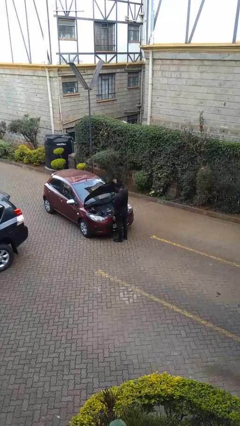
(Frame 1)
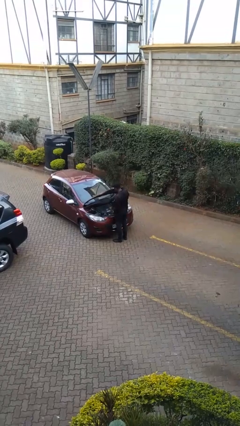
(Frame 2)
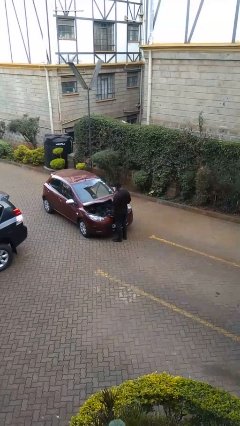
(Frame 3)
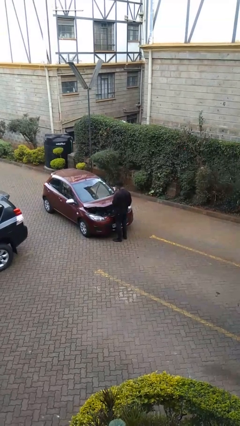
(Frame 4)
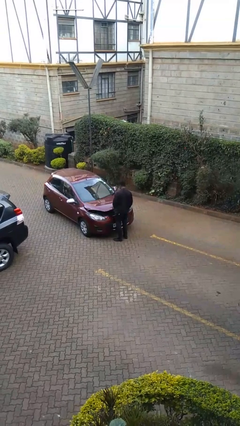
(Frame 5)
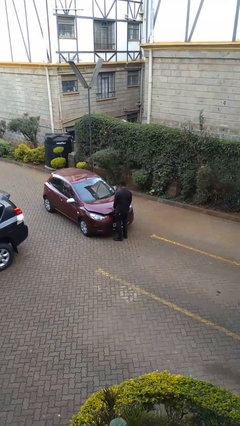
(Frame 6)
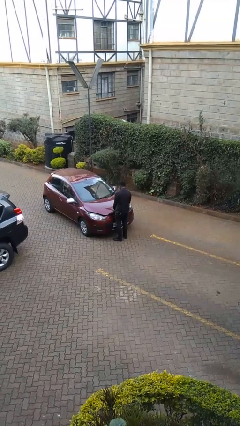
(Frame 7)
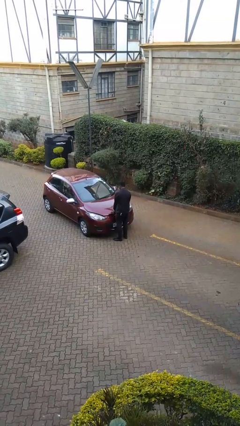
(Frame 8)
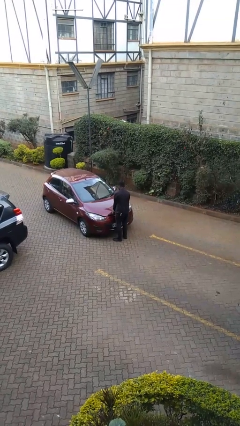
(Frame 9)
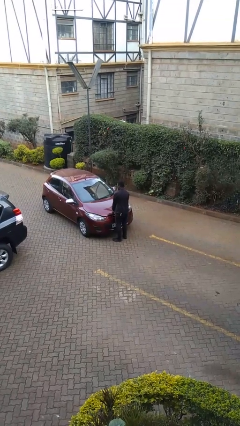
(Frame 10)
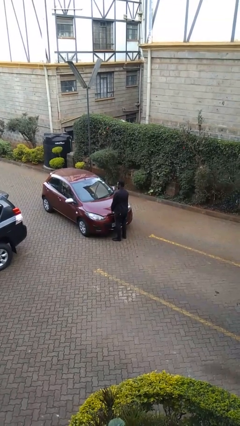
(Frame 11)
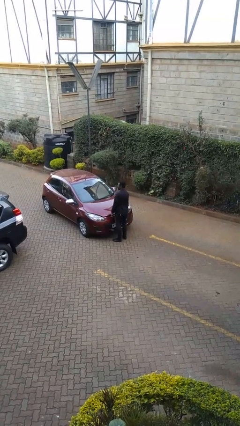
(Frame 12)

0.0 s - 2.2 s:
person closes car hood

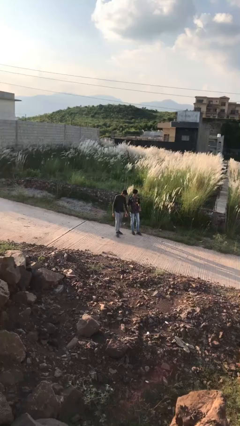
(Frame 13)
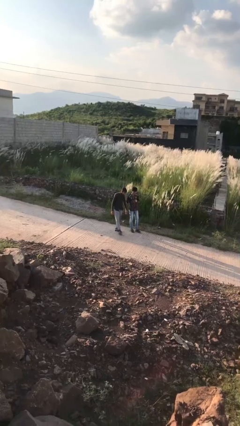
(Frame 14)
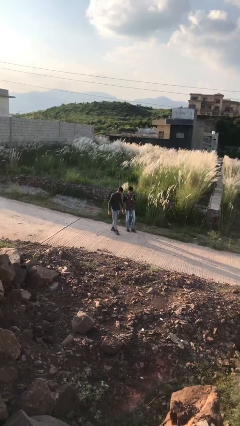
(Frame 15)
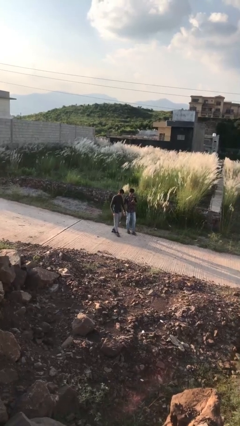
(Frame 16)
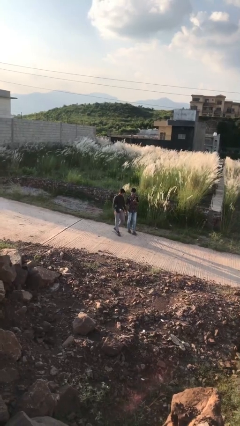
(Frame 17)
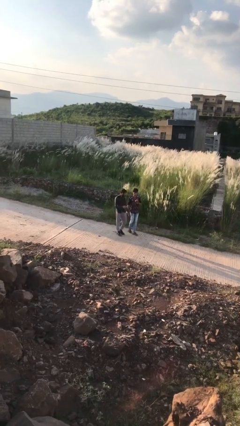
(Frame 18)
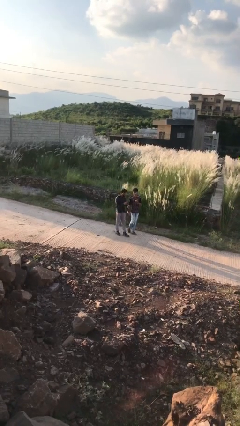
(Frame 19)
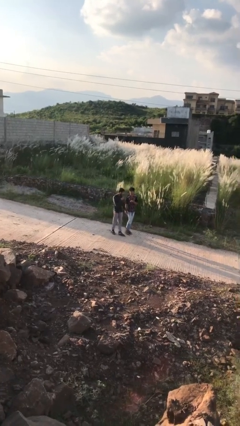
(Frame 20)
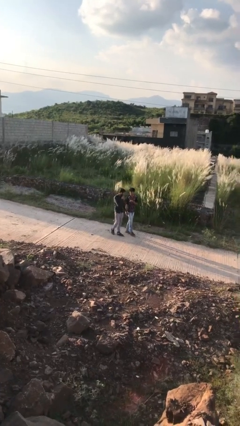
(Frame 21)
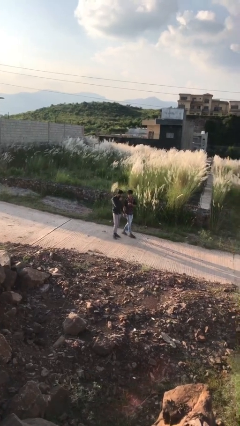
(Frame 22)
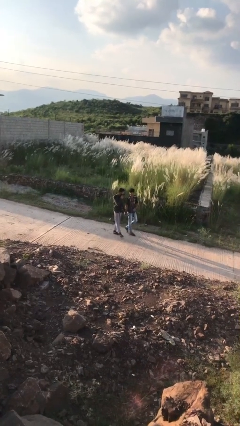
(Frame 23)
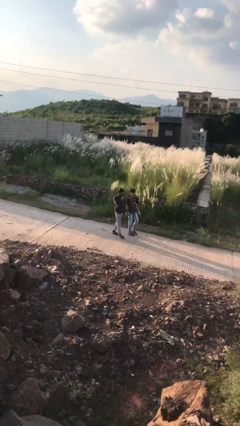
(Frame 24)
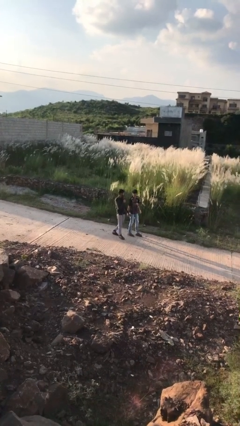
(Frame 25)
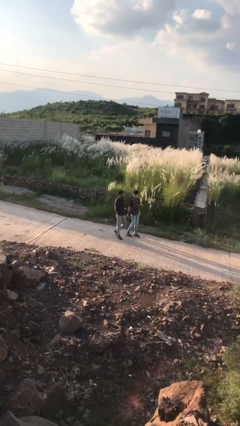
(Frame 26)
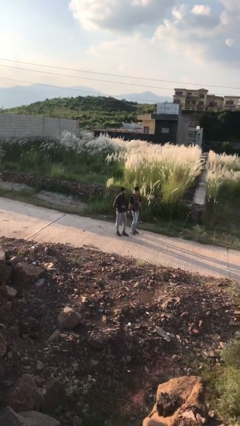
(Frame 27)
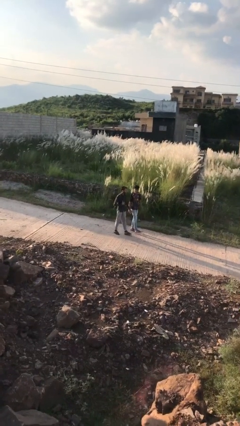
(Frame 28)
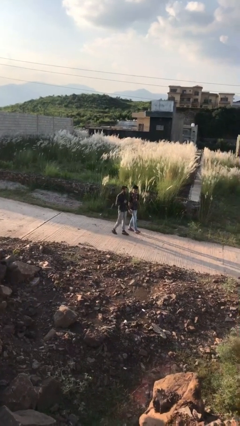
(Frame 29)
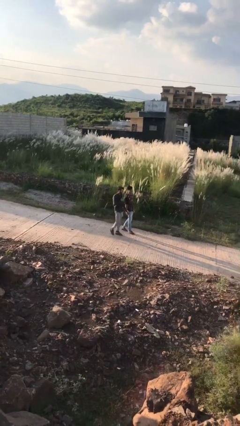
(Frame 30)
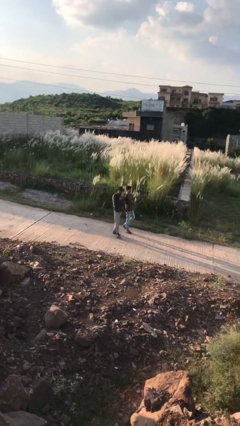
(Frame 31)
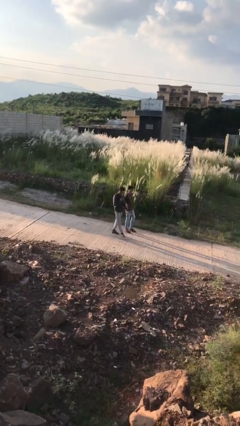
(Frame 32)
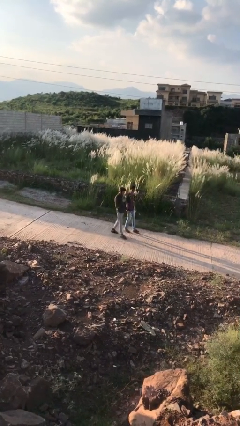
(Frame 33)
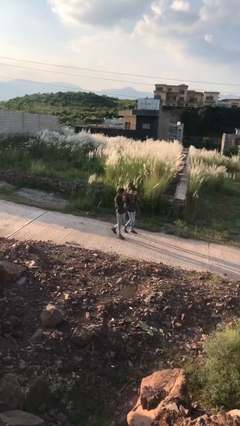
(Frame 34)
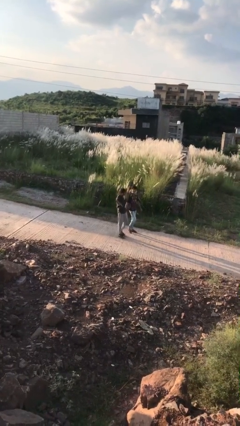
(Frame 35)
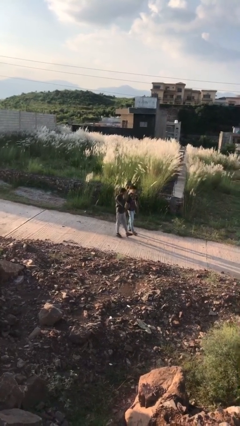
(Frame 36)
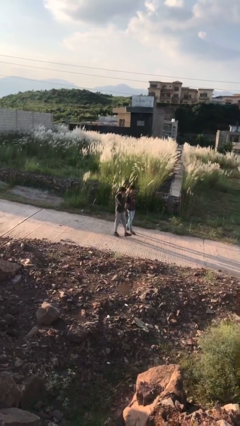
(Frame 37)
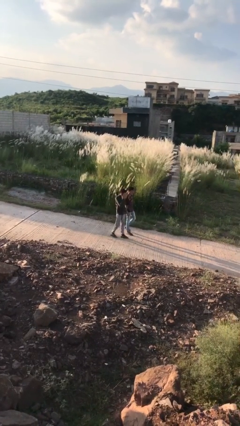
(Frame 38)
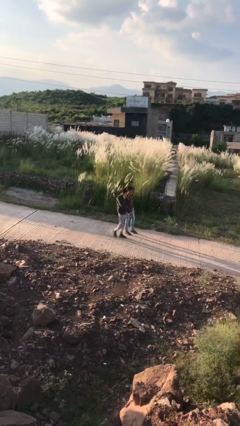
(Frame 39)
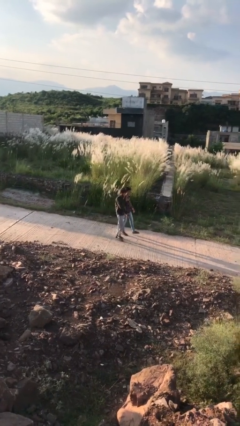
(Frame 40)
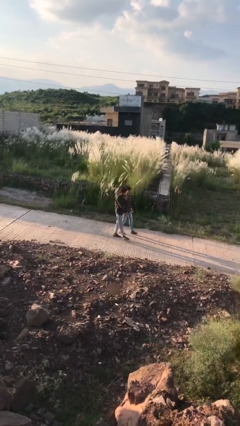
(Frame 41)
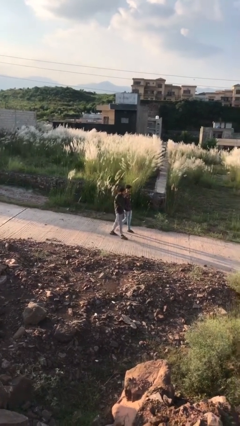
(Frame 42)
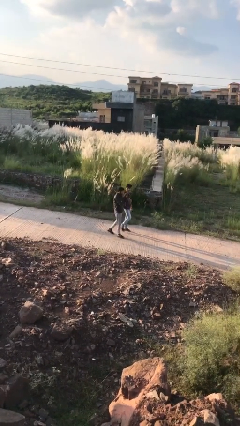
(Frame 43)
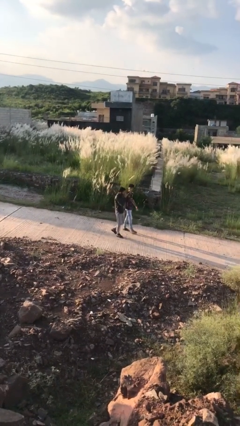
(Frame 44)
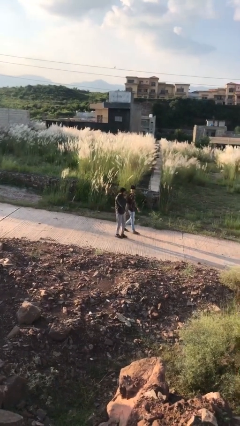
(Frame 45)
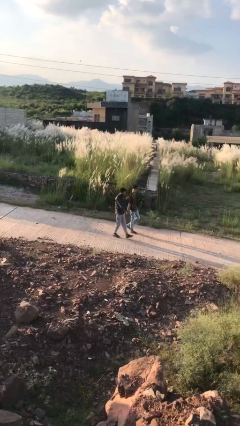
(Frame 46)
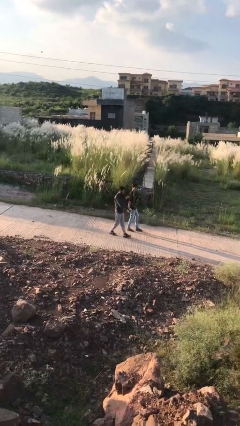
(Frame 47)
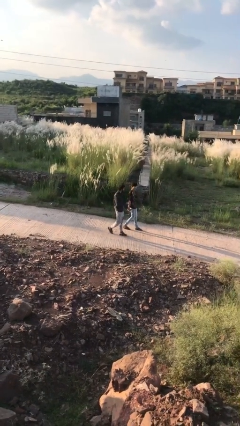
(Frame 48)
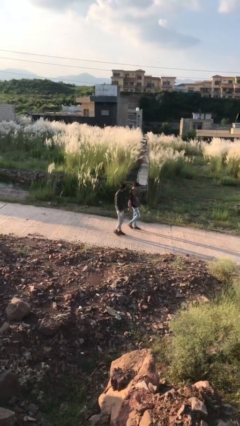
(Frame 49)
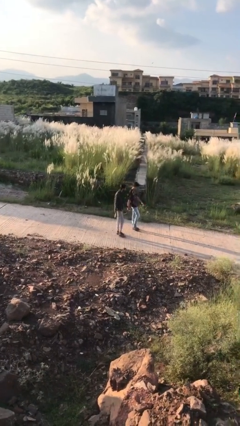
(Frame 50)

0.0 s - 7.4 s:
person holds hand

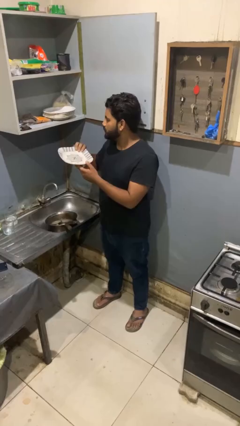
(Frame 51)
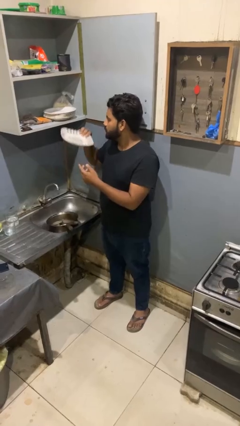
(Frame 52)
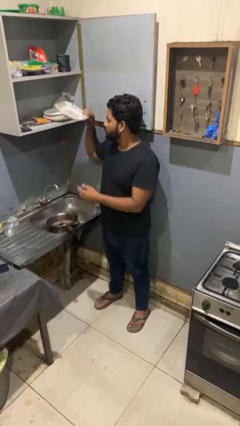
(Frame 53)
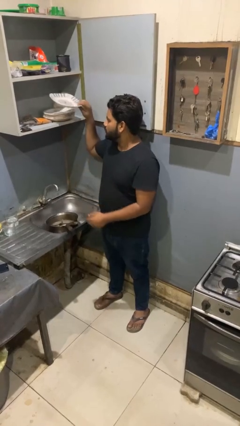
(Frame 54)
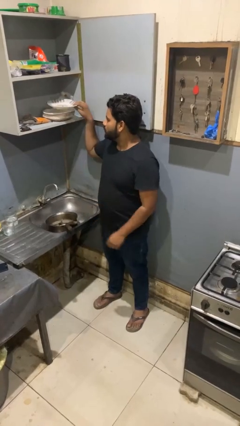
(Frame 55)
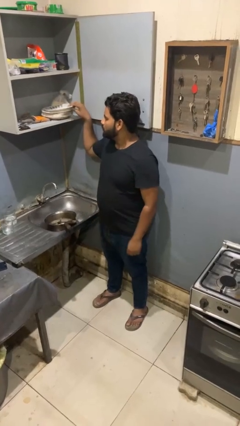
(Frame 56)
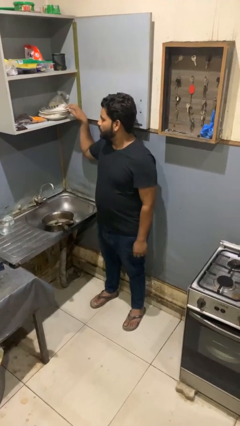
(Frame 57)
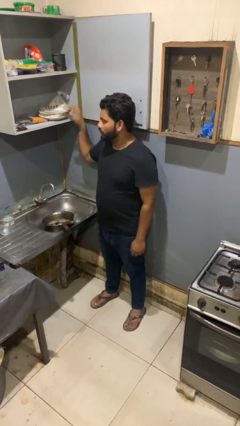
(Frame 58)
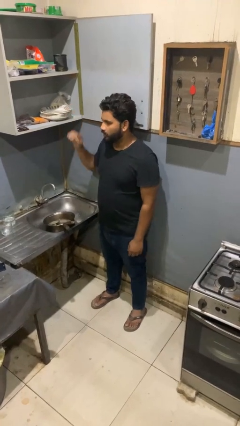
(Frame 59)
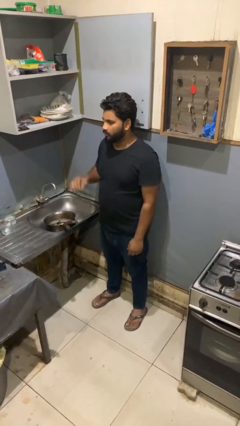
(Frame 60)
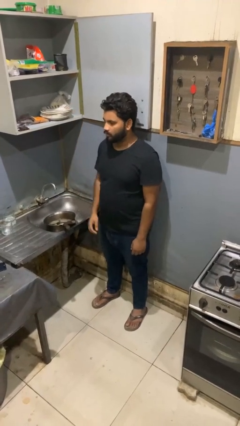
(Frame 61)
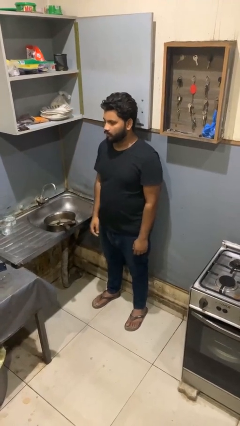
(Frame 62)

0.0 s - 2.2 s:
person puts object into kitchen drawer

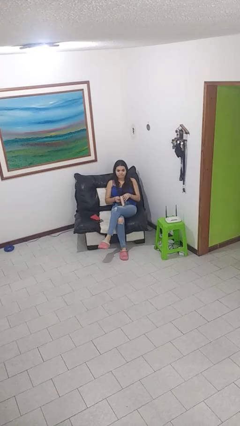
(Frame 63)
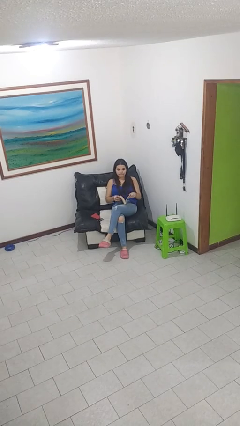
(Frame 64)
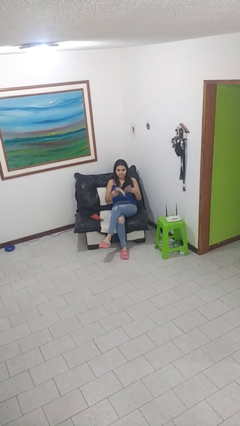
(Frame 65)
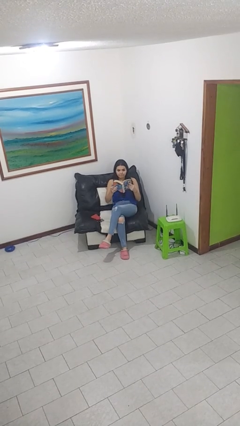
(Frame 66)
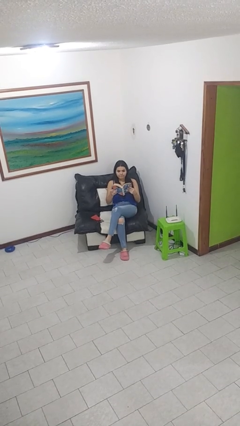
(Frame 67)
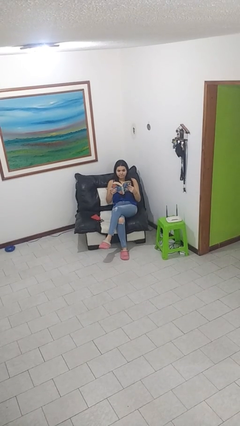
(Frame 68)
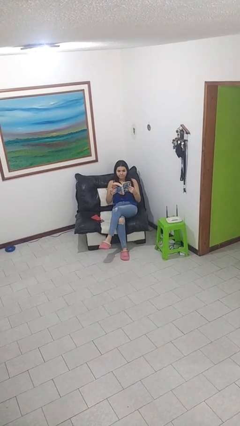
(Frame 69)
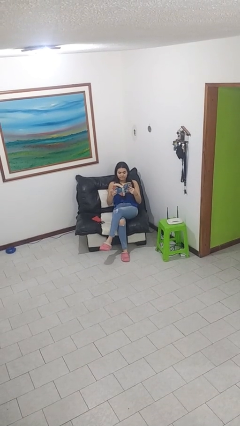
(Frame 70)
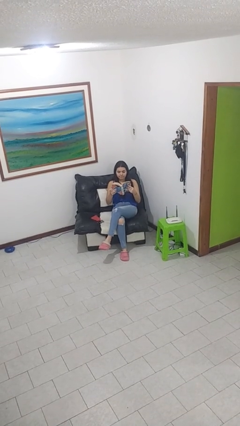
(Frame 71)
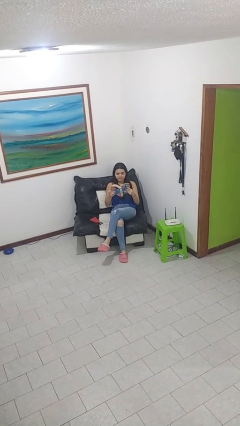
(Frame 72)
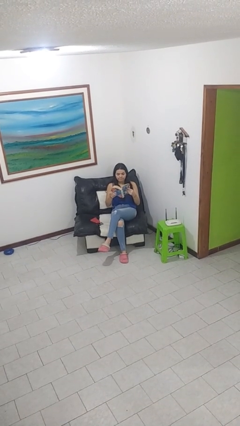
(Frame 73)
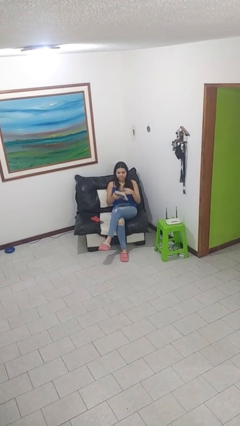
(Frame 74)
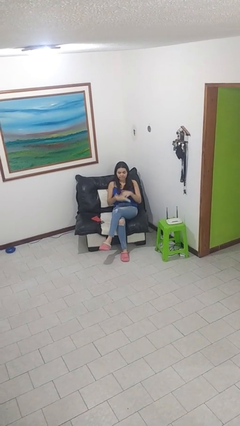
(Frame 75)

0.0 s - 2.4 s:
person reads book

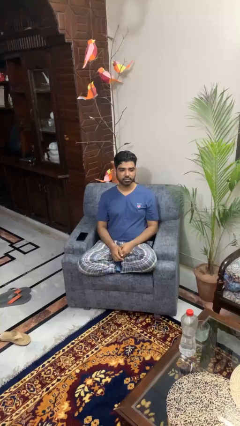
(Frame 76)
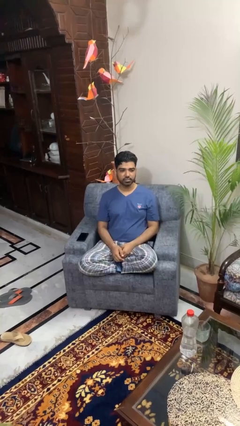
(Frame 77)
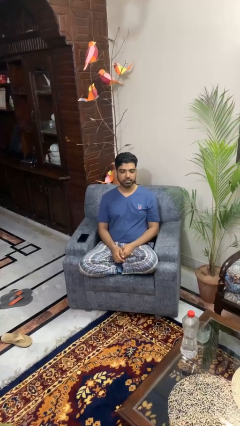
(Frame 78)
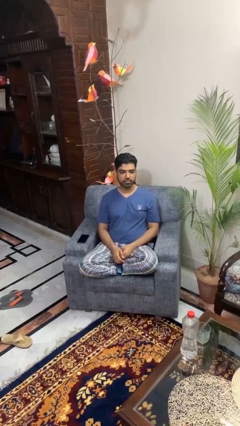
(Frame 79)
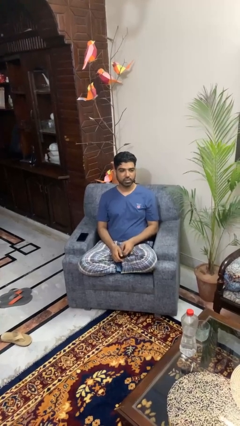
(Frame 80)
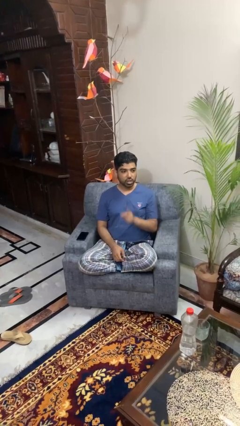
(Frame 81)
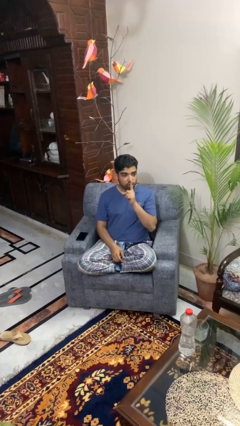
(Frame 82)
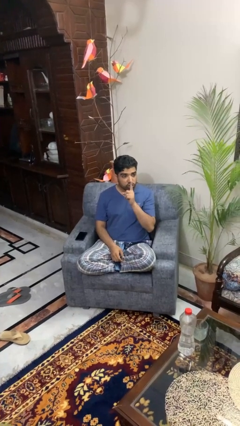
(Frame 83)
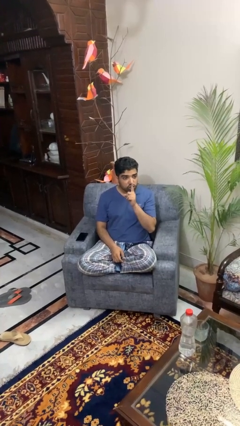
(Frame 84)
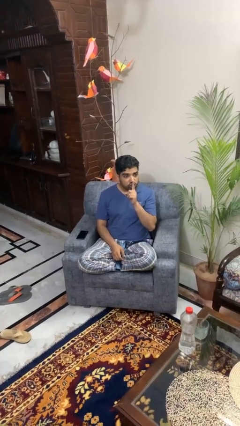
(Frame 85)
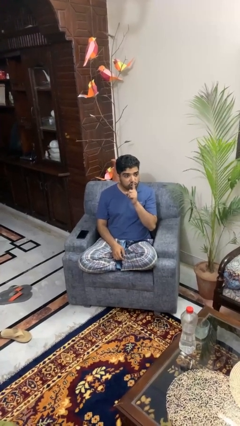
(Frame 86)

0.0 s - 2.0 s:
person gestures be quiet

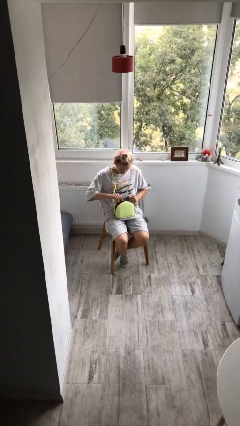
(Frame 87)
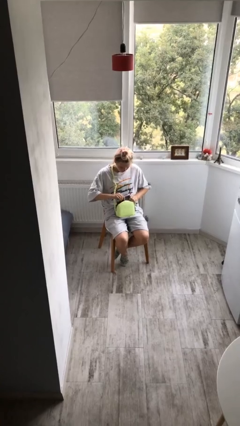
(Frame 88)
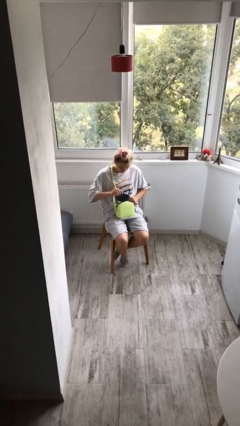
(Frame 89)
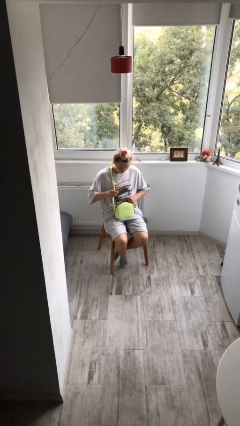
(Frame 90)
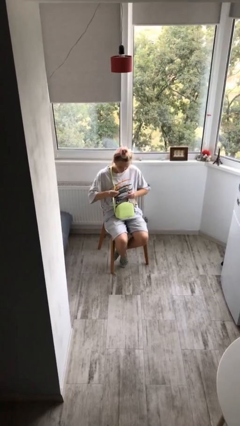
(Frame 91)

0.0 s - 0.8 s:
person takes object from purse

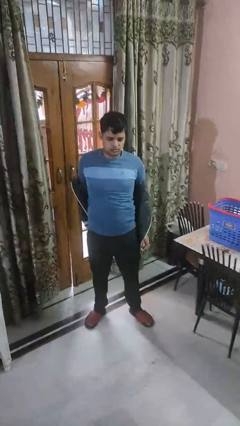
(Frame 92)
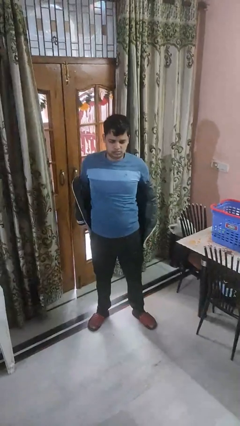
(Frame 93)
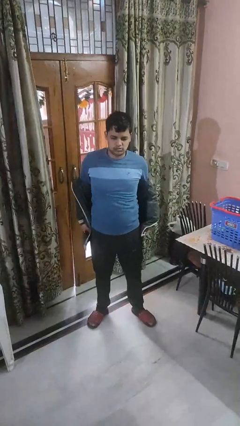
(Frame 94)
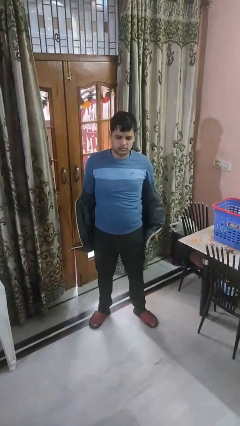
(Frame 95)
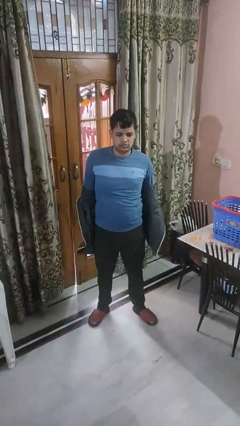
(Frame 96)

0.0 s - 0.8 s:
person takes off jacket
